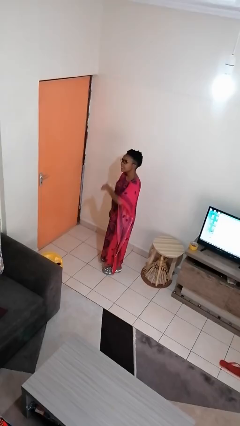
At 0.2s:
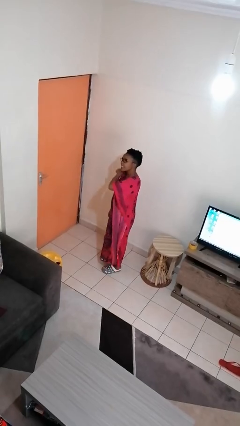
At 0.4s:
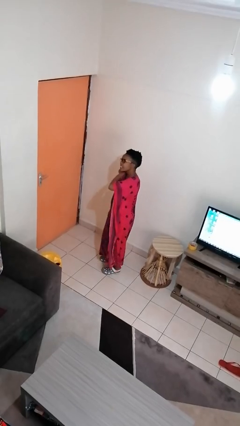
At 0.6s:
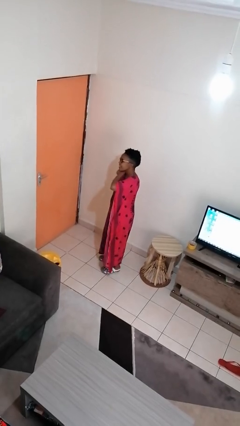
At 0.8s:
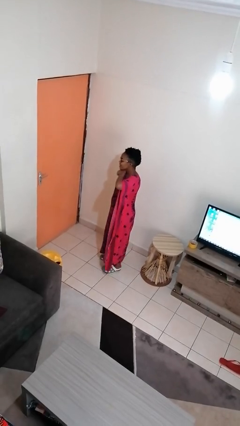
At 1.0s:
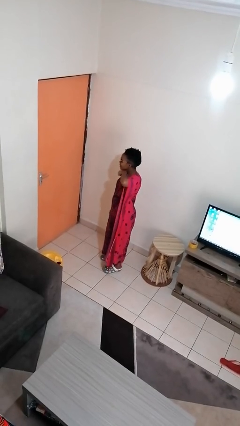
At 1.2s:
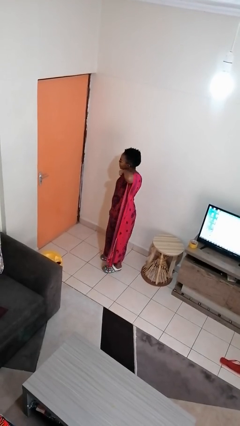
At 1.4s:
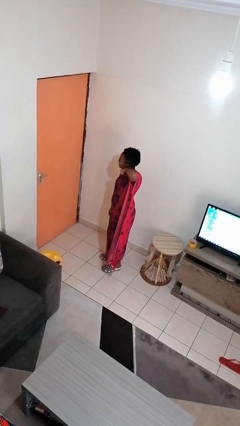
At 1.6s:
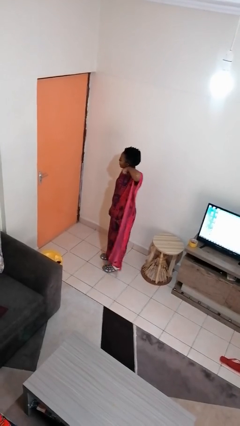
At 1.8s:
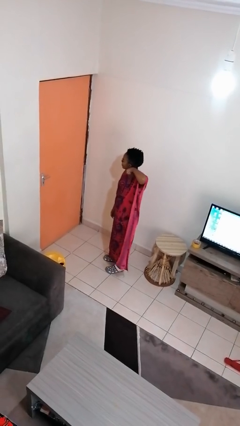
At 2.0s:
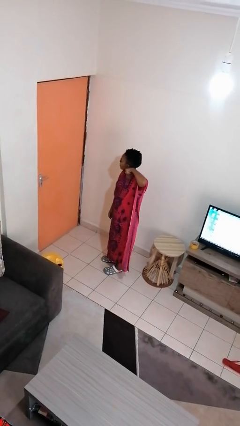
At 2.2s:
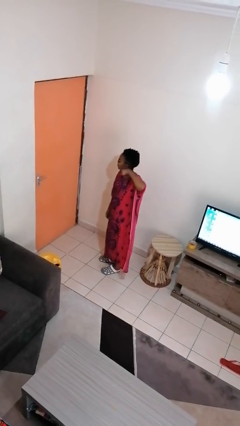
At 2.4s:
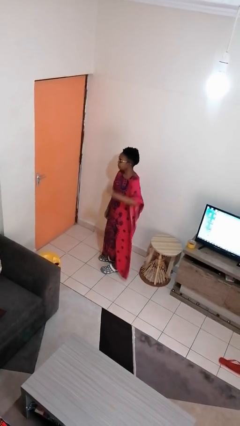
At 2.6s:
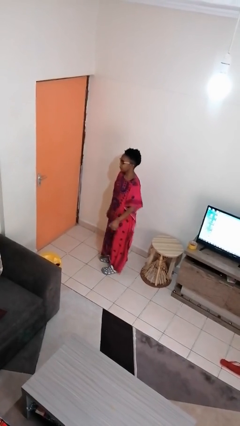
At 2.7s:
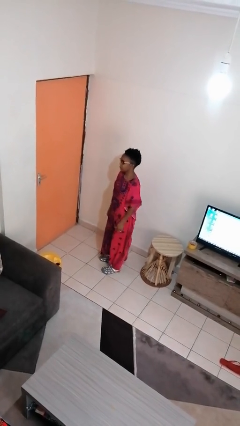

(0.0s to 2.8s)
person gestures cut

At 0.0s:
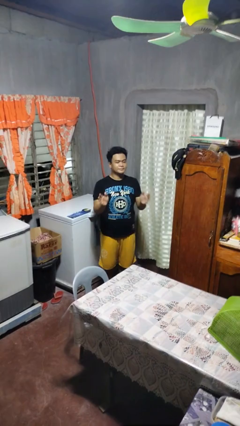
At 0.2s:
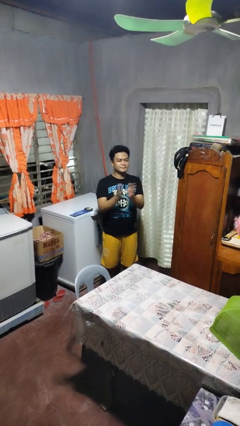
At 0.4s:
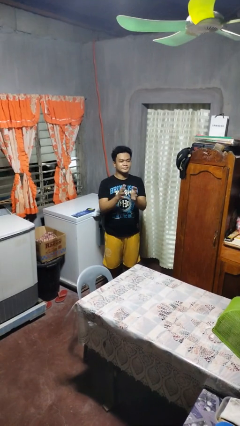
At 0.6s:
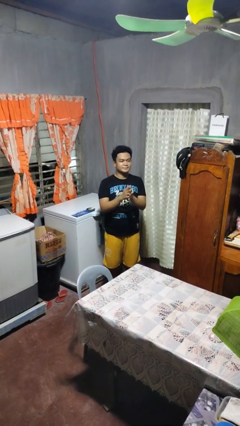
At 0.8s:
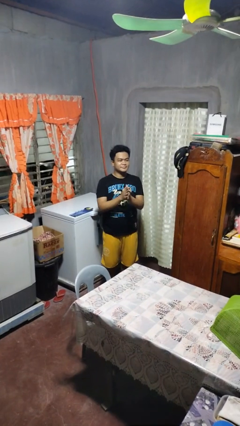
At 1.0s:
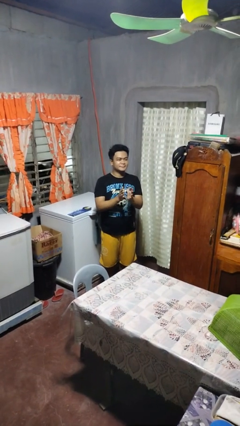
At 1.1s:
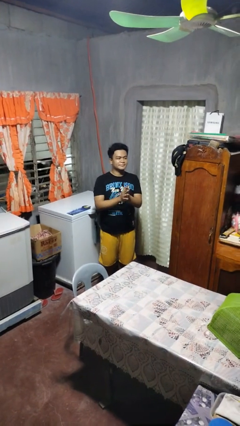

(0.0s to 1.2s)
person claps hands

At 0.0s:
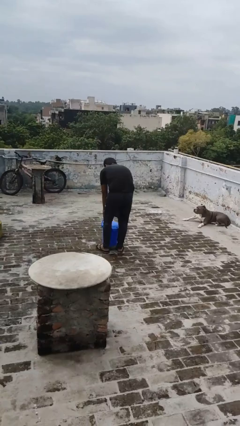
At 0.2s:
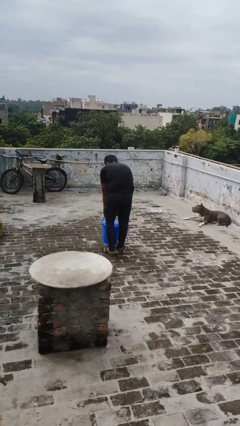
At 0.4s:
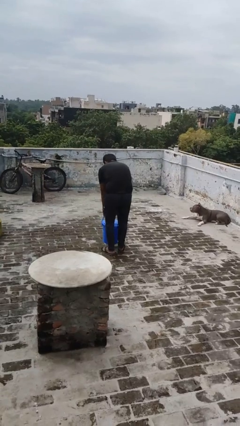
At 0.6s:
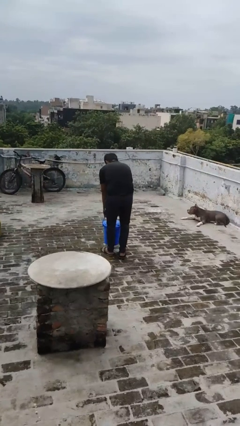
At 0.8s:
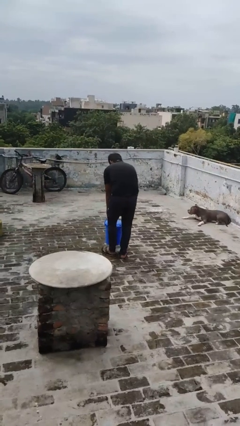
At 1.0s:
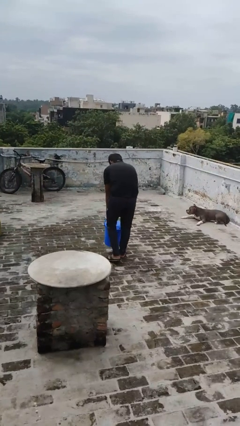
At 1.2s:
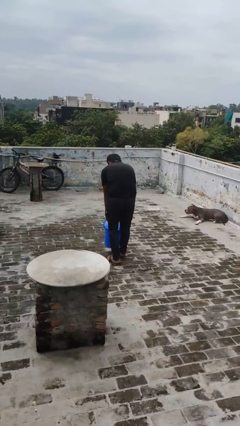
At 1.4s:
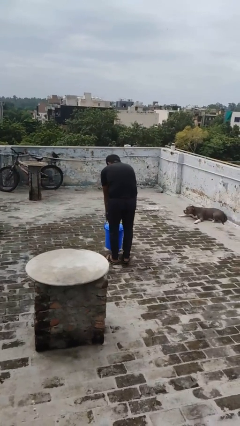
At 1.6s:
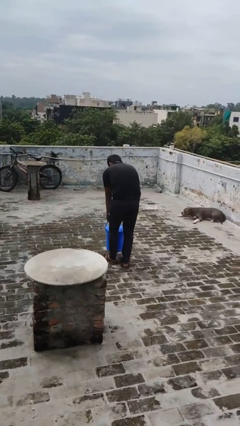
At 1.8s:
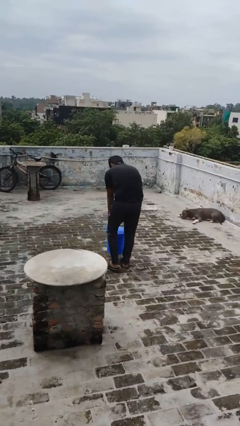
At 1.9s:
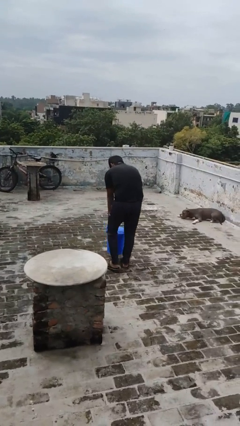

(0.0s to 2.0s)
person pulls wheeled trashcan

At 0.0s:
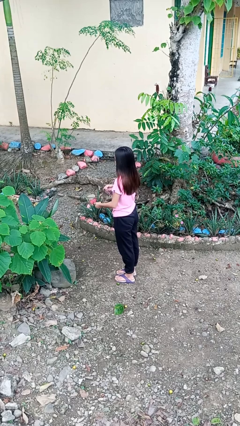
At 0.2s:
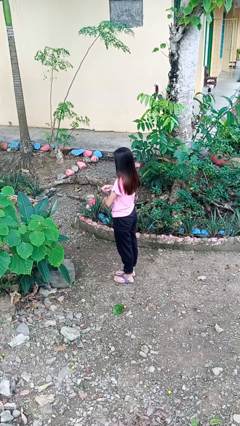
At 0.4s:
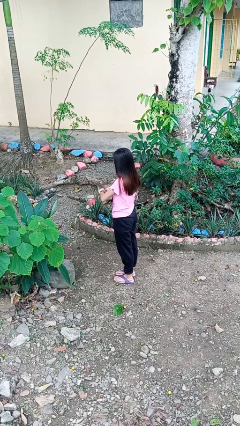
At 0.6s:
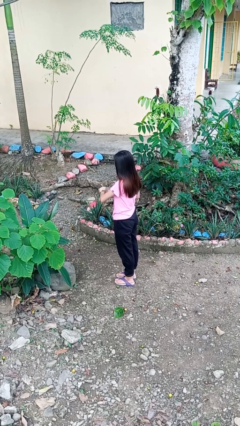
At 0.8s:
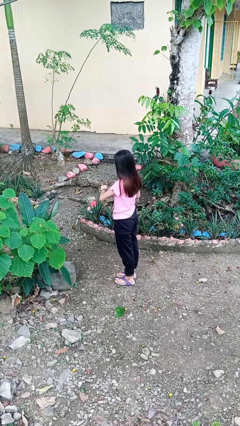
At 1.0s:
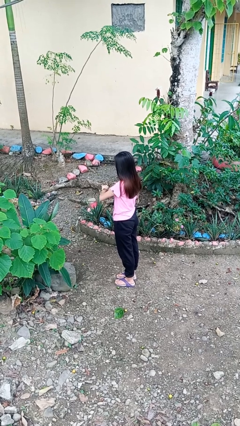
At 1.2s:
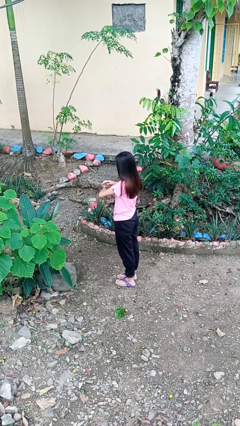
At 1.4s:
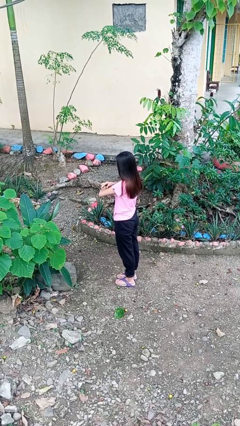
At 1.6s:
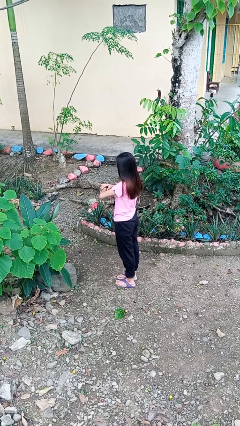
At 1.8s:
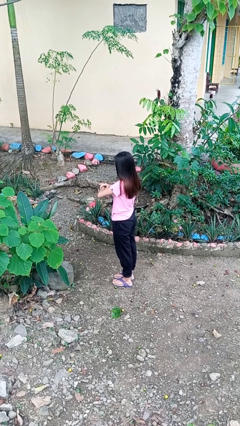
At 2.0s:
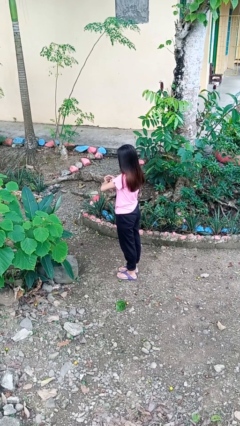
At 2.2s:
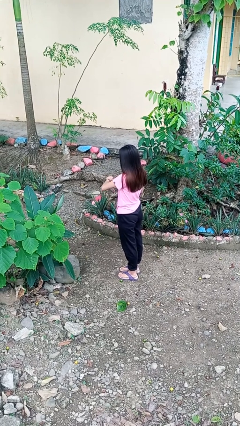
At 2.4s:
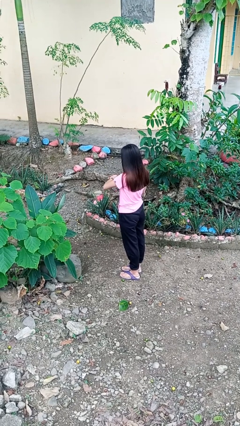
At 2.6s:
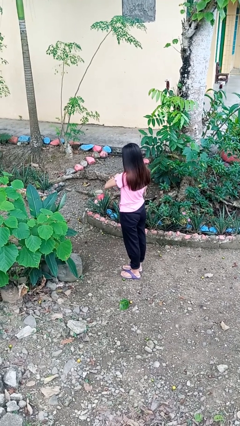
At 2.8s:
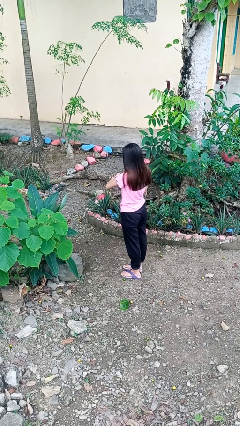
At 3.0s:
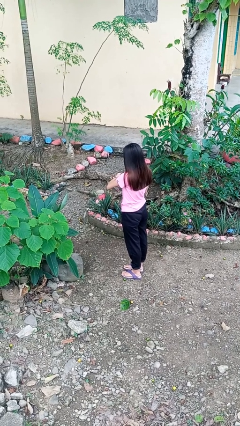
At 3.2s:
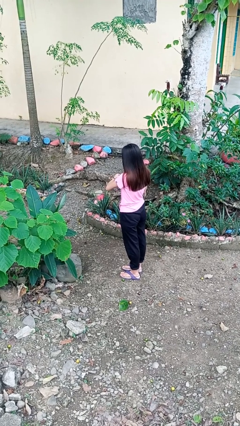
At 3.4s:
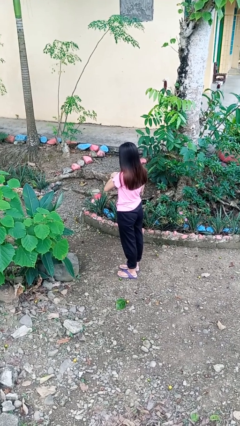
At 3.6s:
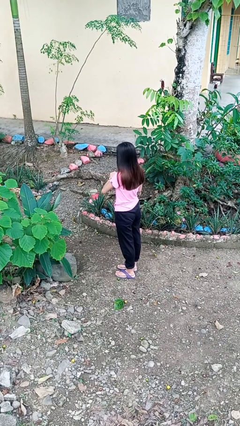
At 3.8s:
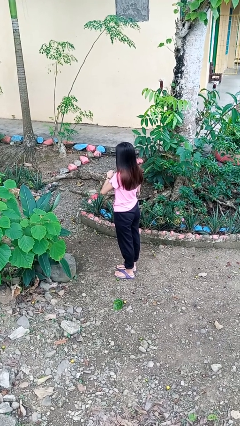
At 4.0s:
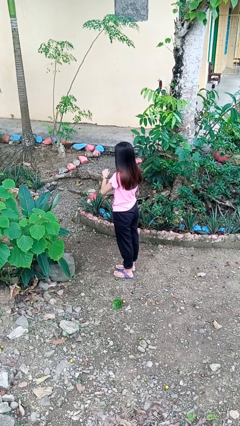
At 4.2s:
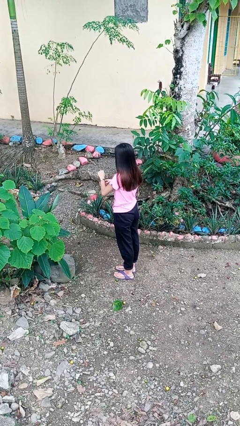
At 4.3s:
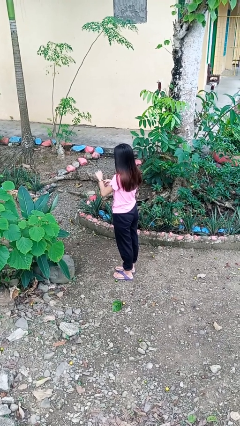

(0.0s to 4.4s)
person puts on wristwatch

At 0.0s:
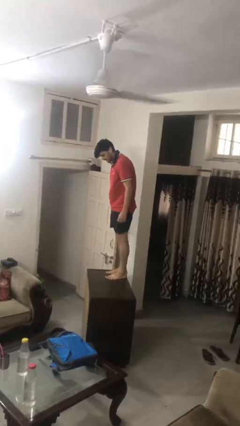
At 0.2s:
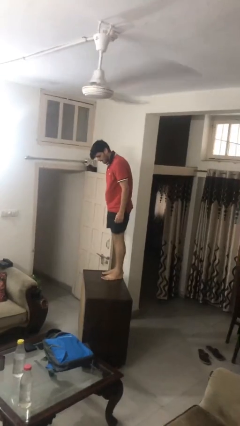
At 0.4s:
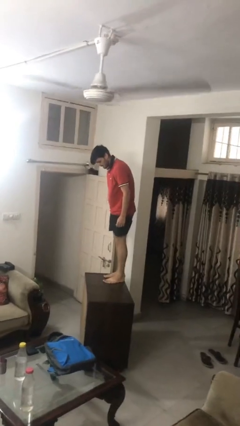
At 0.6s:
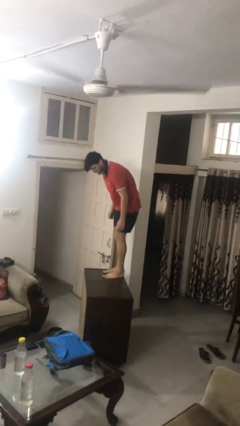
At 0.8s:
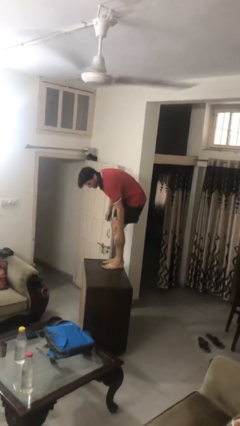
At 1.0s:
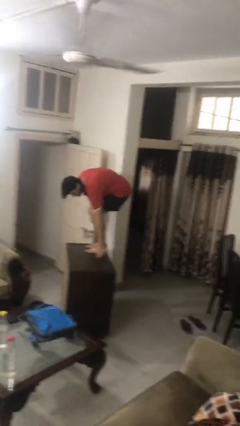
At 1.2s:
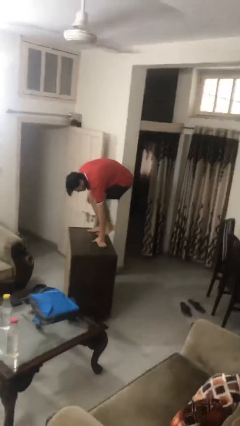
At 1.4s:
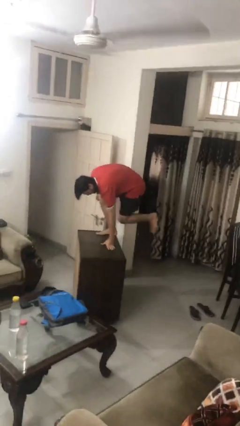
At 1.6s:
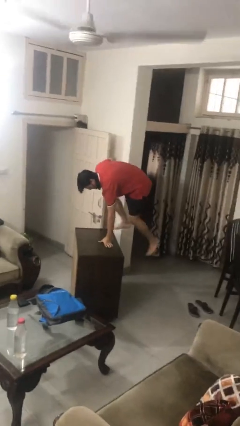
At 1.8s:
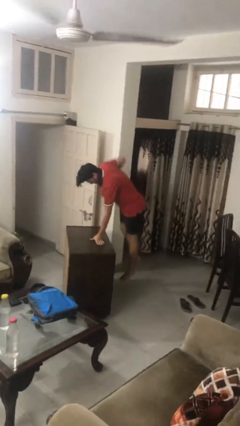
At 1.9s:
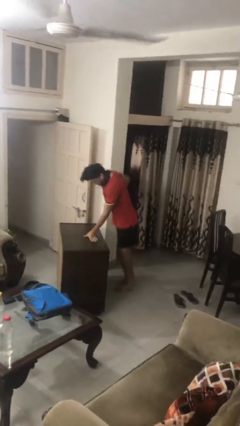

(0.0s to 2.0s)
person climbs off table

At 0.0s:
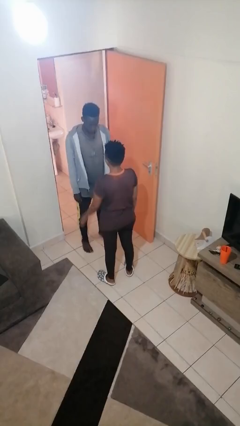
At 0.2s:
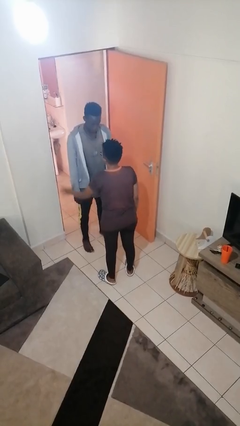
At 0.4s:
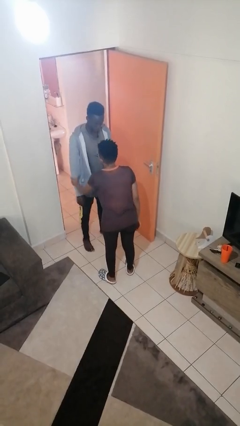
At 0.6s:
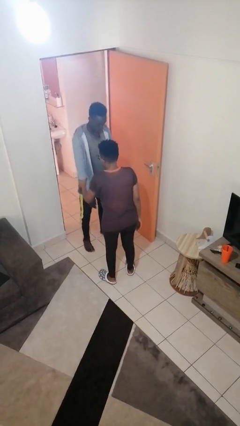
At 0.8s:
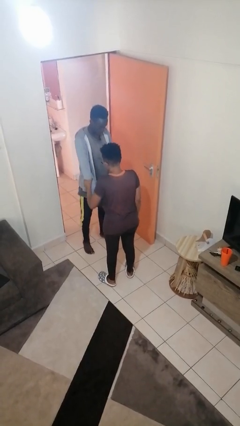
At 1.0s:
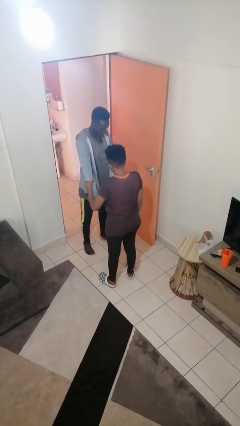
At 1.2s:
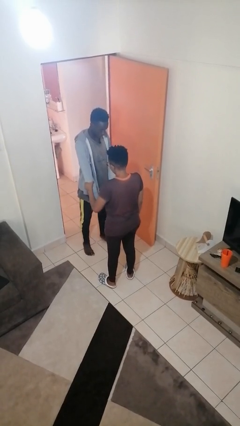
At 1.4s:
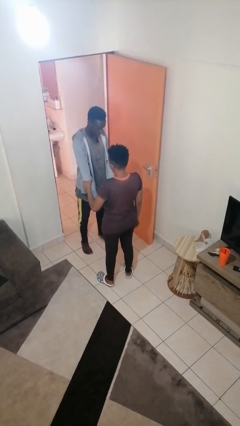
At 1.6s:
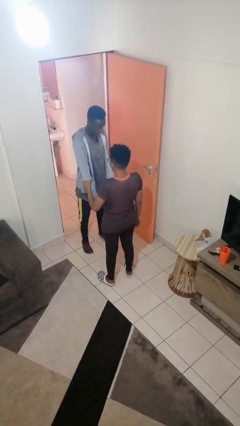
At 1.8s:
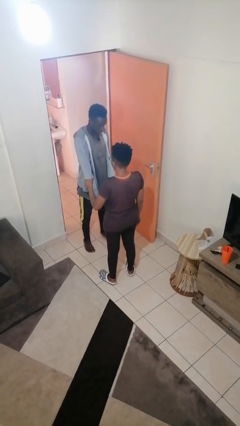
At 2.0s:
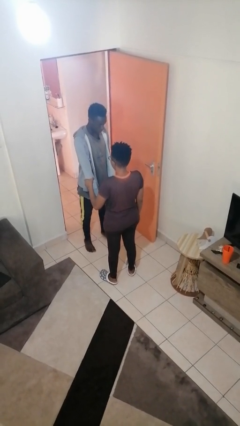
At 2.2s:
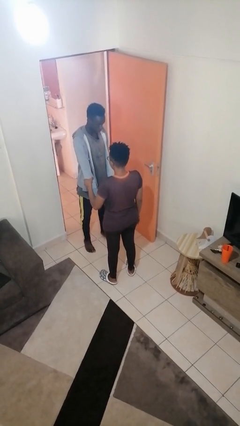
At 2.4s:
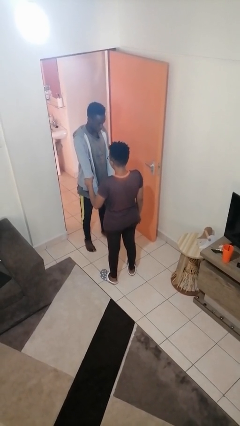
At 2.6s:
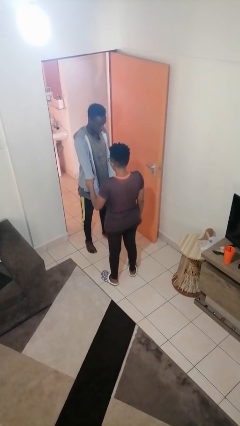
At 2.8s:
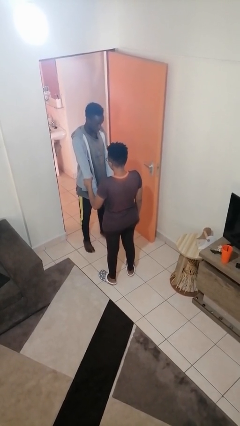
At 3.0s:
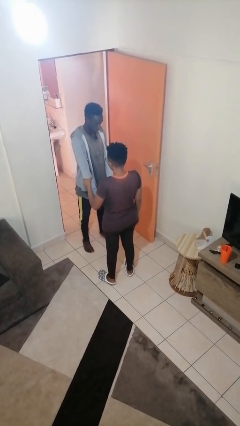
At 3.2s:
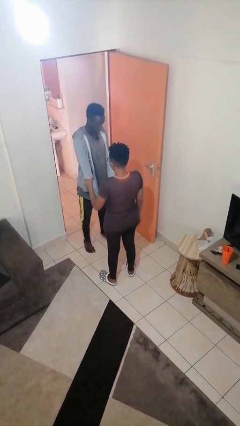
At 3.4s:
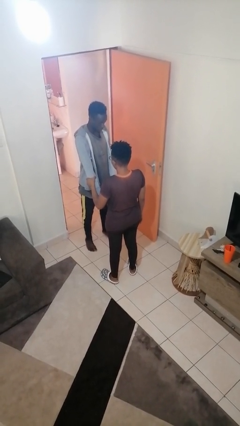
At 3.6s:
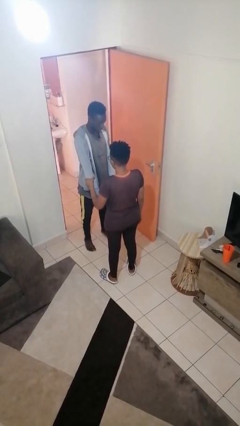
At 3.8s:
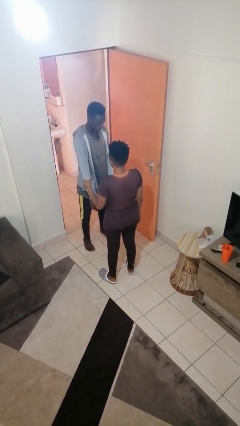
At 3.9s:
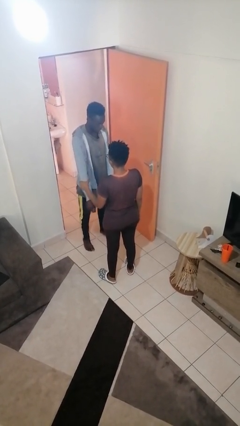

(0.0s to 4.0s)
person grabs person by forearm

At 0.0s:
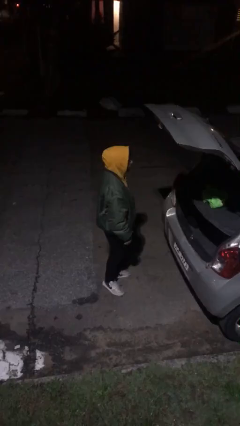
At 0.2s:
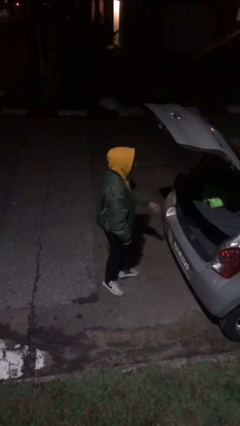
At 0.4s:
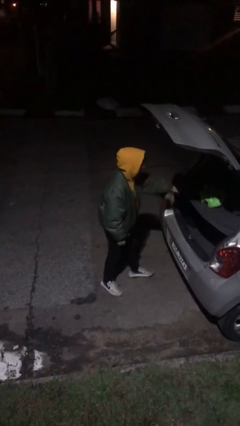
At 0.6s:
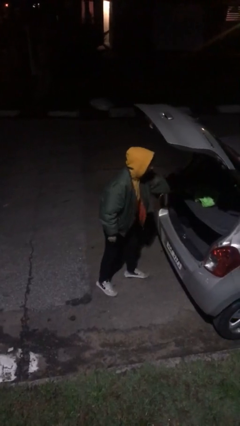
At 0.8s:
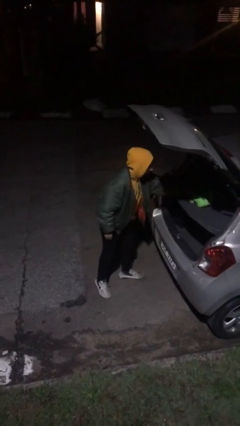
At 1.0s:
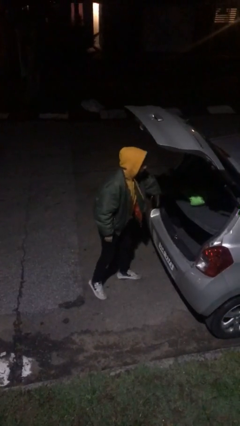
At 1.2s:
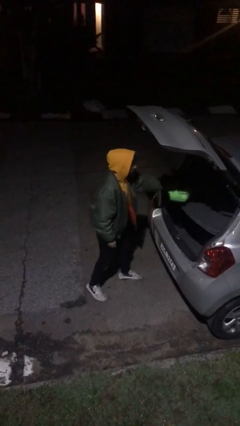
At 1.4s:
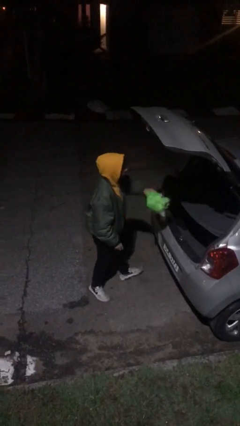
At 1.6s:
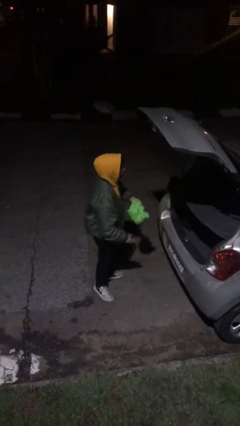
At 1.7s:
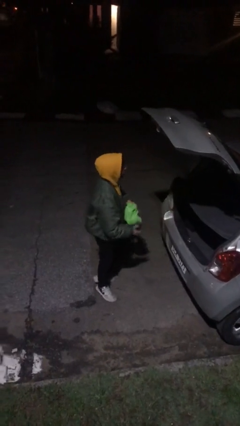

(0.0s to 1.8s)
person unloads car
